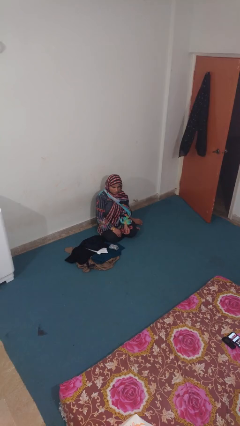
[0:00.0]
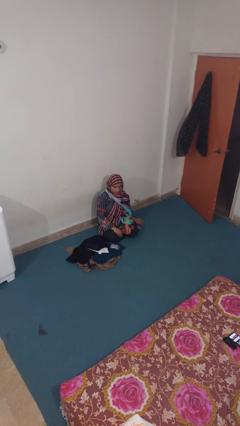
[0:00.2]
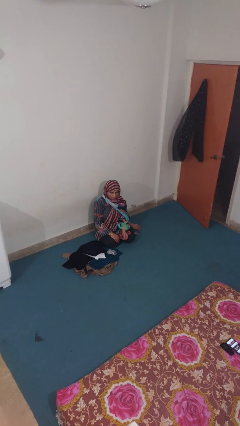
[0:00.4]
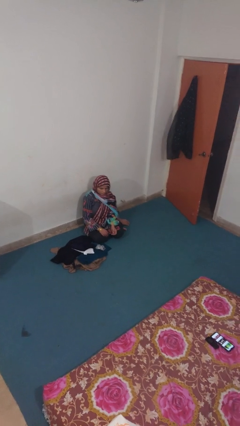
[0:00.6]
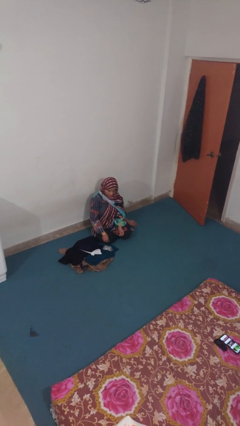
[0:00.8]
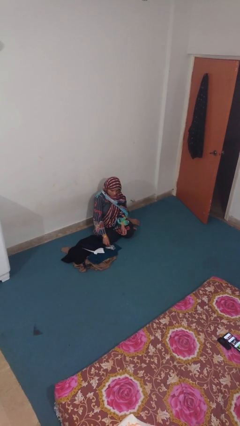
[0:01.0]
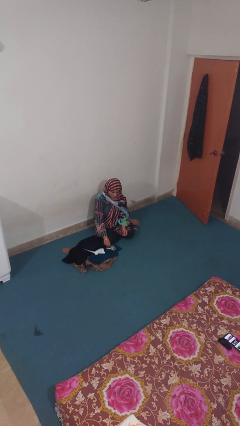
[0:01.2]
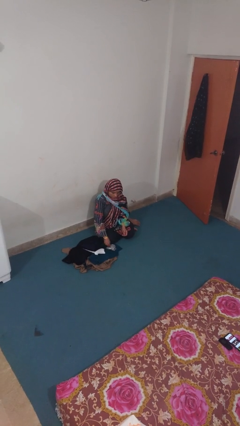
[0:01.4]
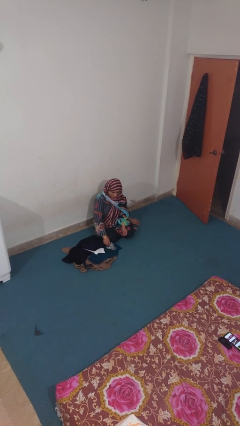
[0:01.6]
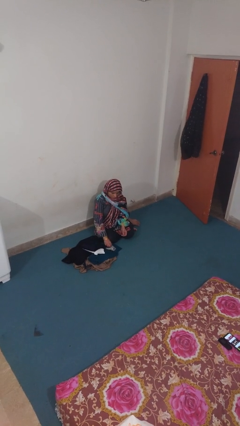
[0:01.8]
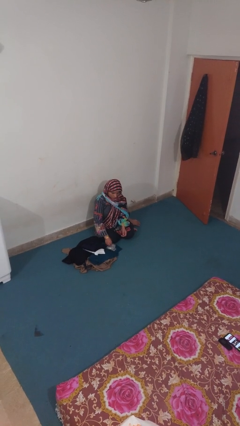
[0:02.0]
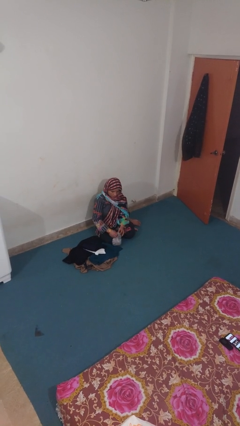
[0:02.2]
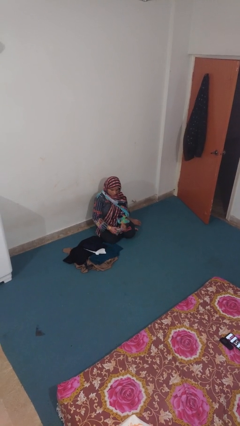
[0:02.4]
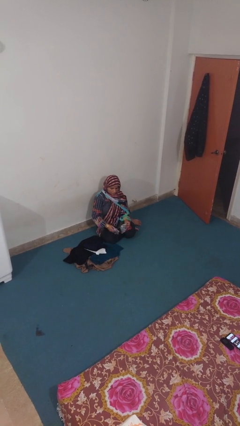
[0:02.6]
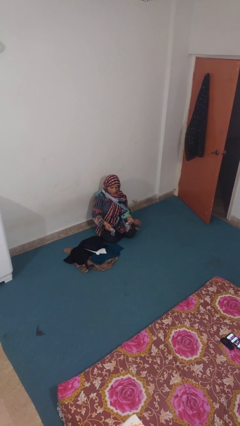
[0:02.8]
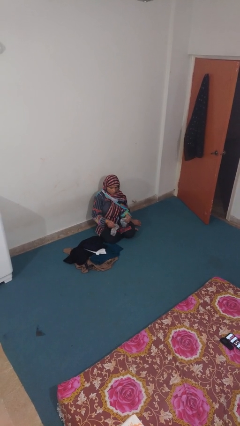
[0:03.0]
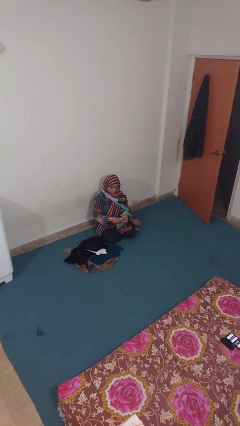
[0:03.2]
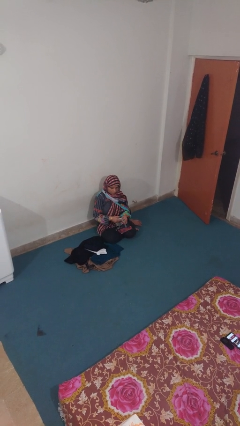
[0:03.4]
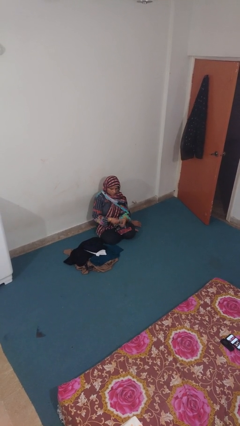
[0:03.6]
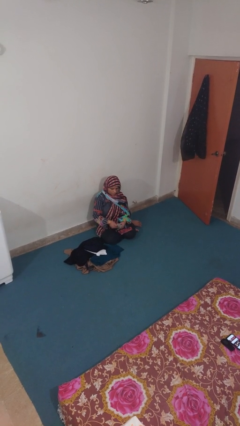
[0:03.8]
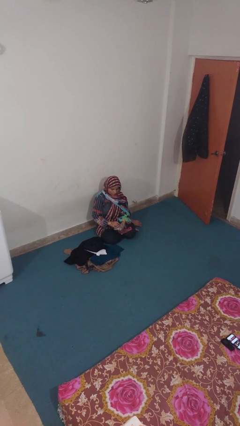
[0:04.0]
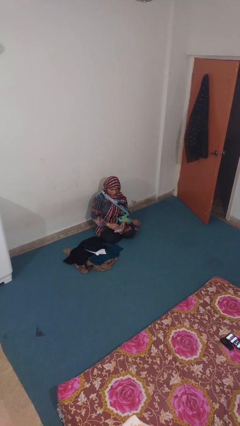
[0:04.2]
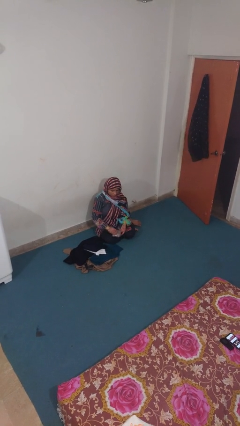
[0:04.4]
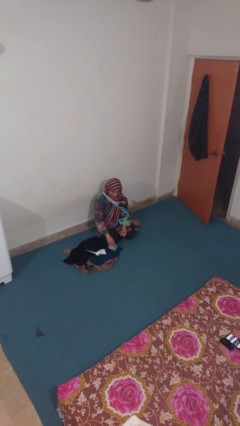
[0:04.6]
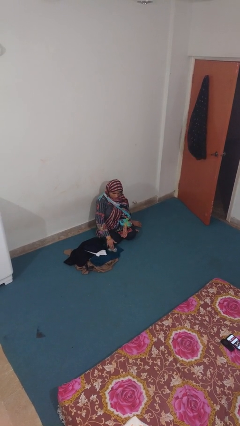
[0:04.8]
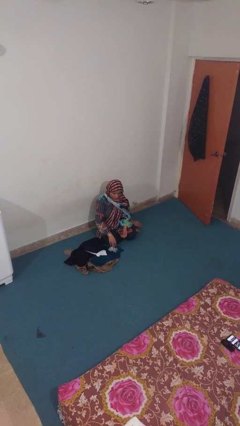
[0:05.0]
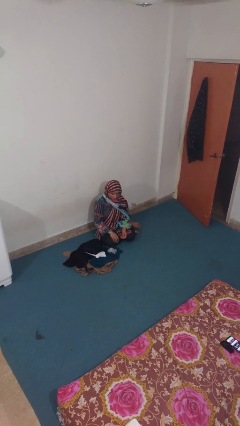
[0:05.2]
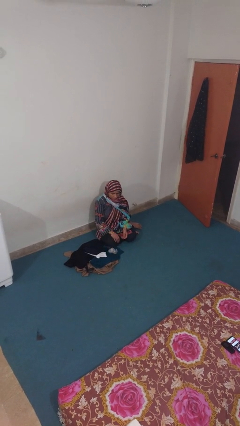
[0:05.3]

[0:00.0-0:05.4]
person folds socks

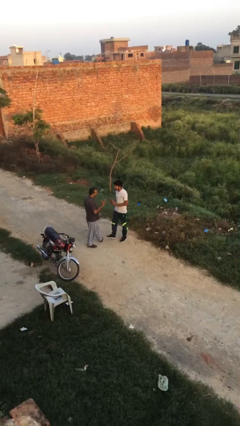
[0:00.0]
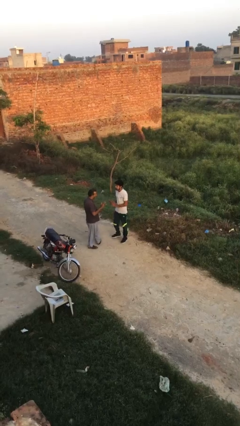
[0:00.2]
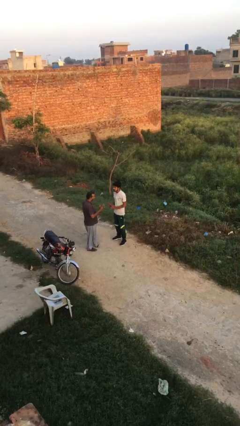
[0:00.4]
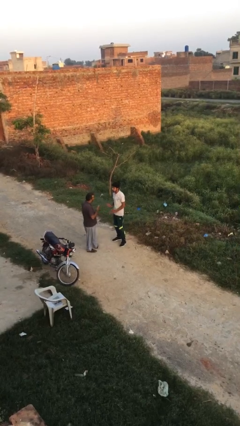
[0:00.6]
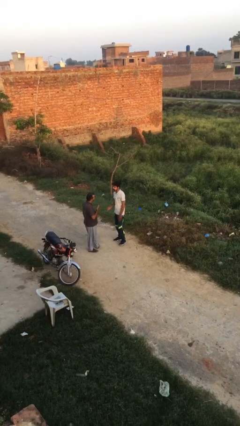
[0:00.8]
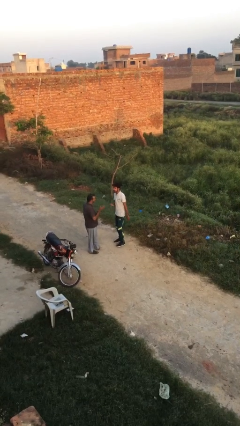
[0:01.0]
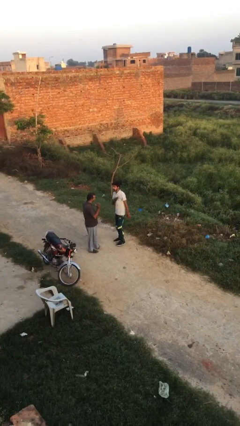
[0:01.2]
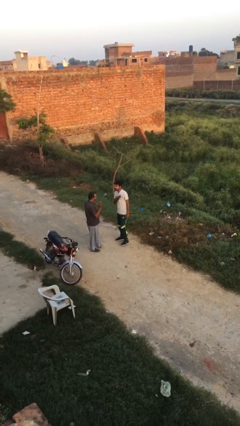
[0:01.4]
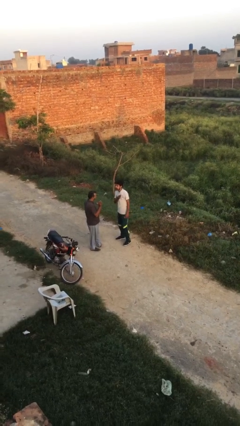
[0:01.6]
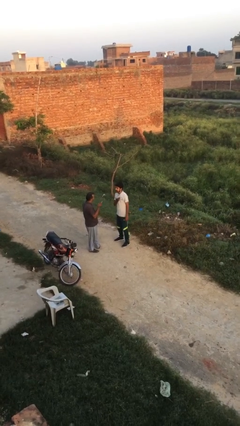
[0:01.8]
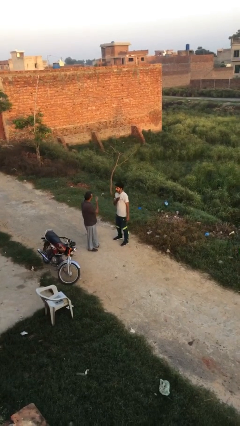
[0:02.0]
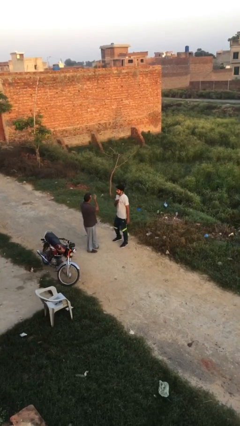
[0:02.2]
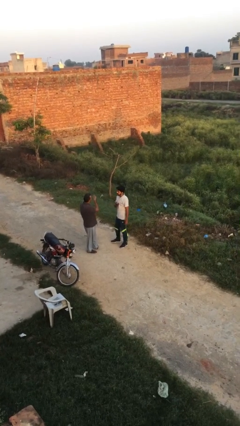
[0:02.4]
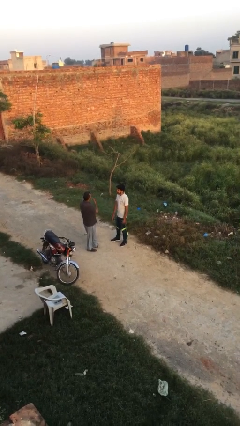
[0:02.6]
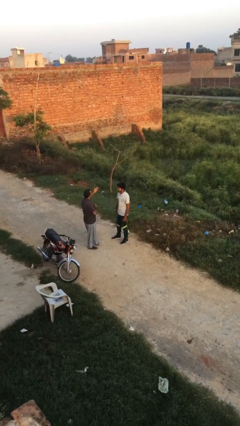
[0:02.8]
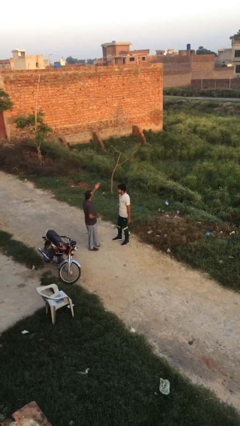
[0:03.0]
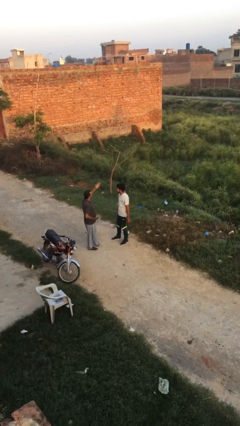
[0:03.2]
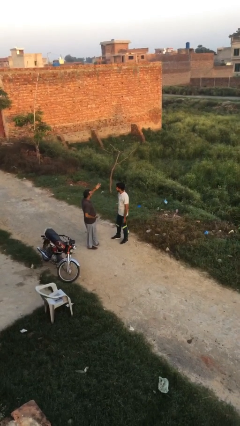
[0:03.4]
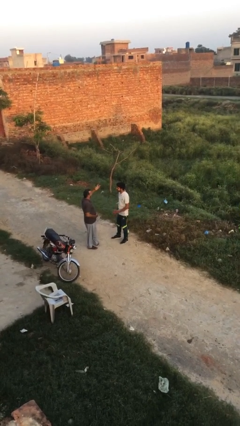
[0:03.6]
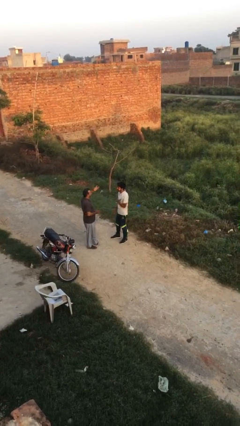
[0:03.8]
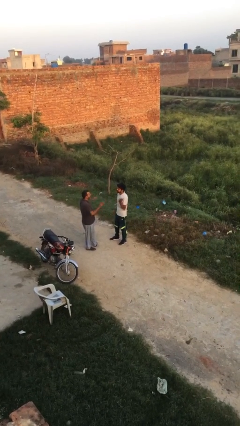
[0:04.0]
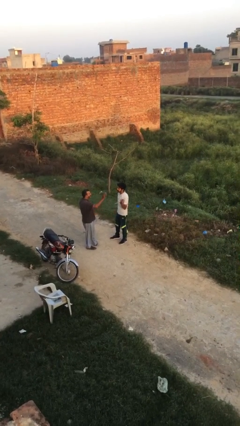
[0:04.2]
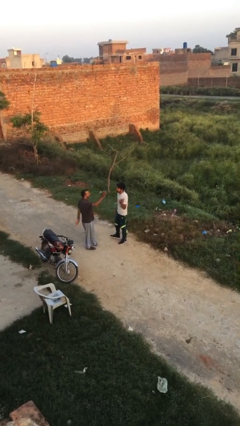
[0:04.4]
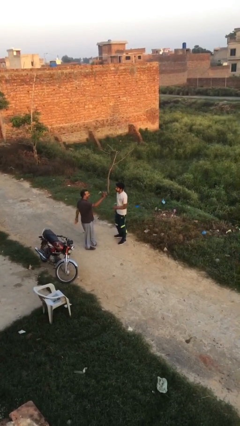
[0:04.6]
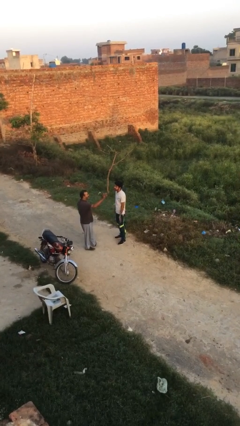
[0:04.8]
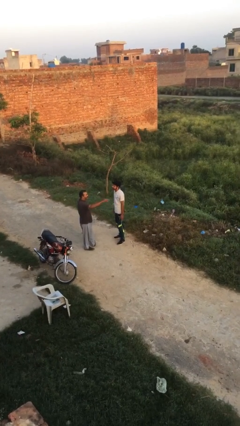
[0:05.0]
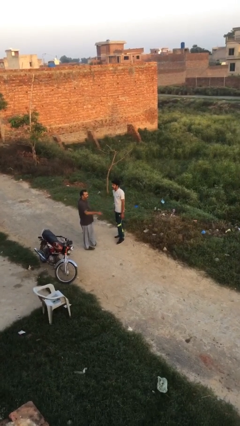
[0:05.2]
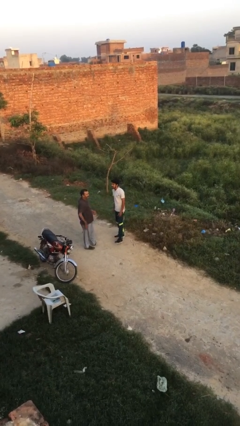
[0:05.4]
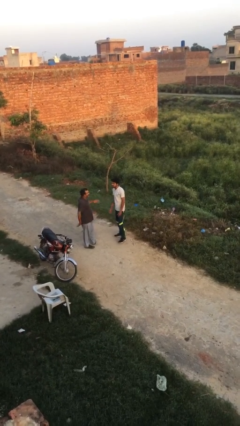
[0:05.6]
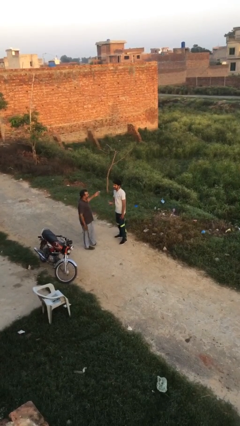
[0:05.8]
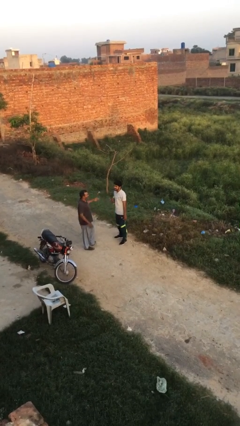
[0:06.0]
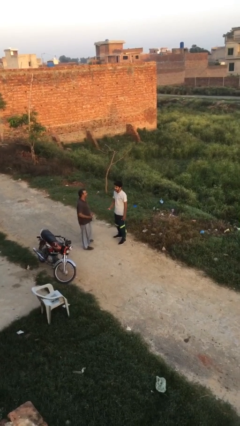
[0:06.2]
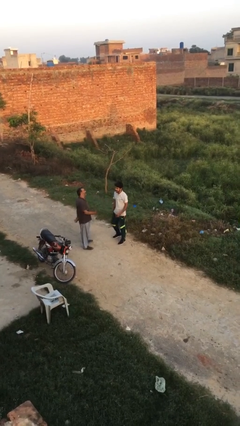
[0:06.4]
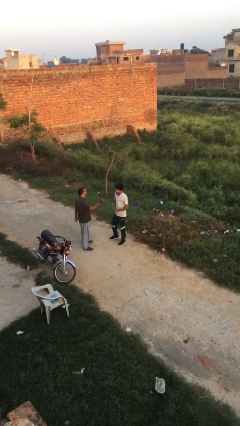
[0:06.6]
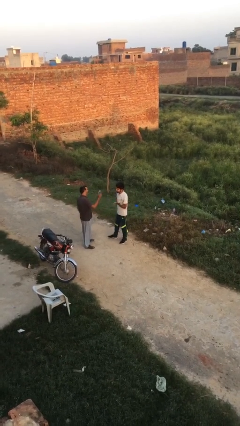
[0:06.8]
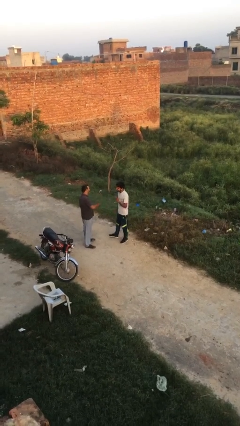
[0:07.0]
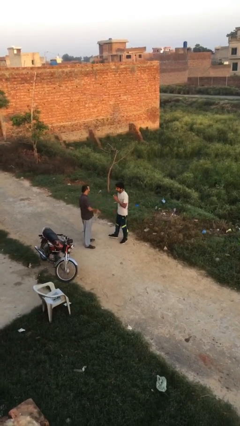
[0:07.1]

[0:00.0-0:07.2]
person talks to person

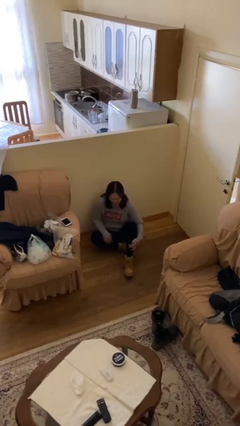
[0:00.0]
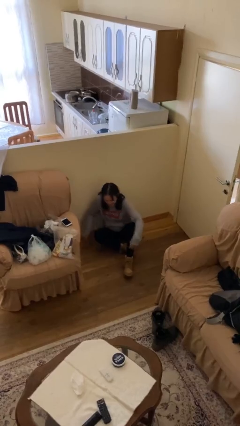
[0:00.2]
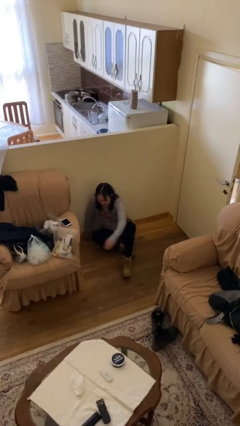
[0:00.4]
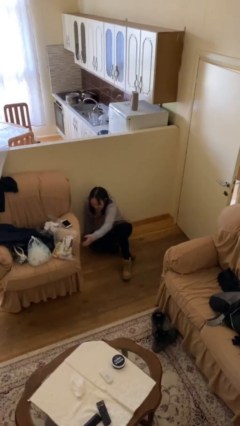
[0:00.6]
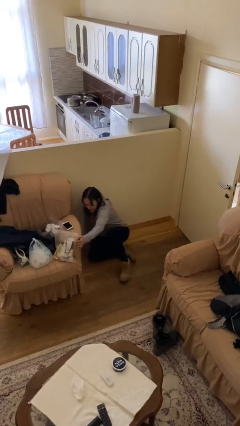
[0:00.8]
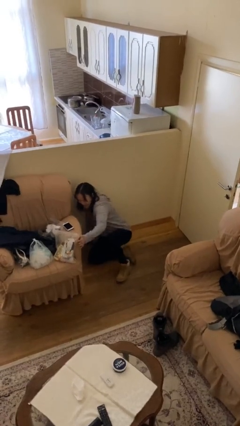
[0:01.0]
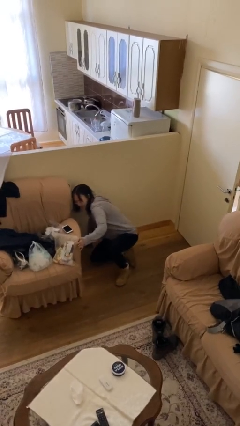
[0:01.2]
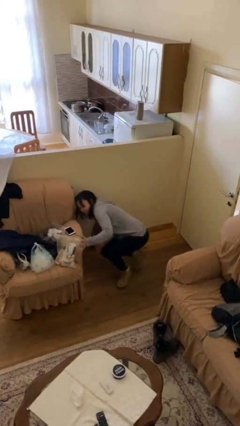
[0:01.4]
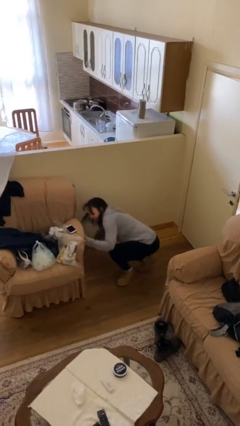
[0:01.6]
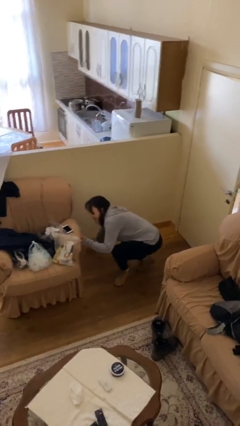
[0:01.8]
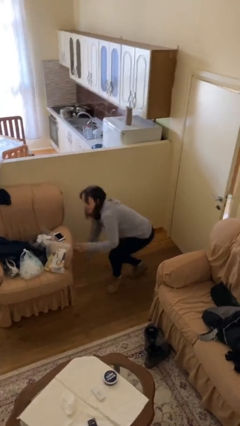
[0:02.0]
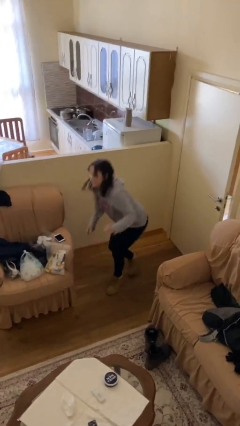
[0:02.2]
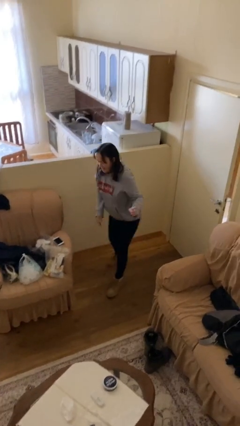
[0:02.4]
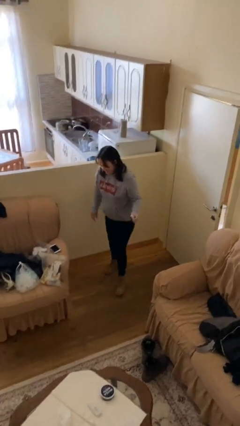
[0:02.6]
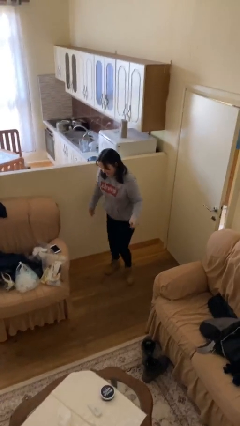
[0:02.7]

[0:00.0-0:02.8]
person stands up

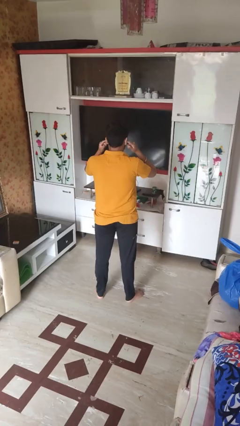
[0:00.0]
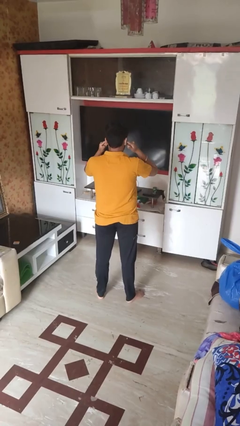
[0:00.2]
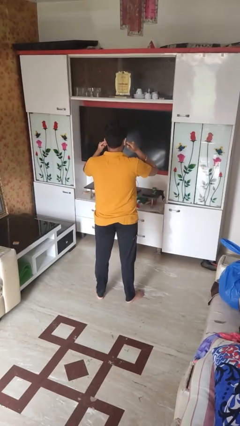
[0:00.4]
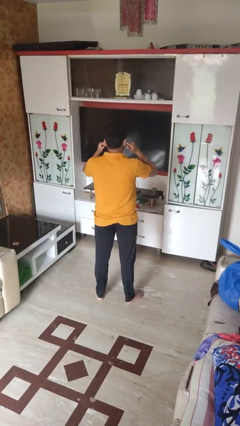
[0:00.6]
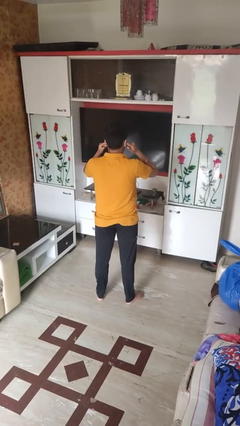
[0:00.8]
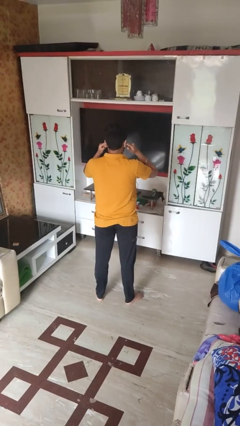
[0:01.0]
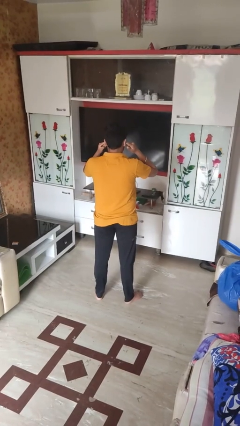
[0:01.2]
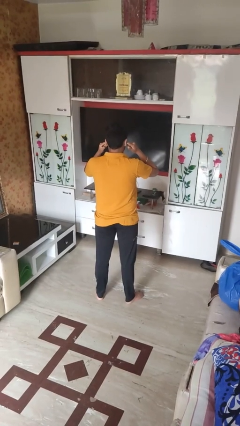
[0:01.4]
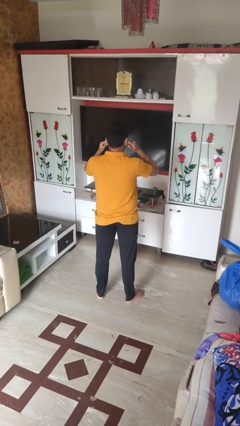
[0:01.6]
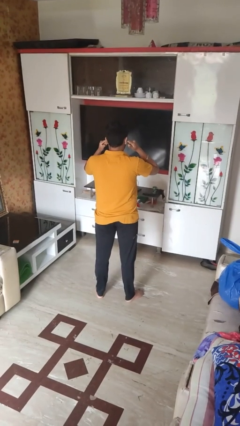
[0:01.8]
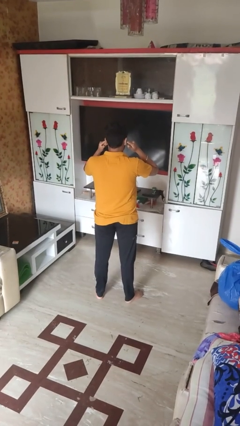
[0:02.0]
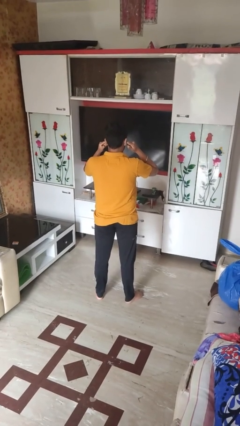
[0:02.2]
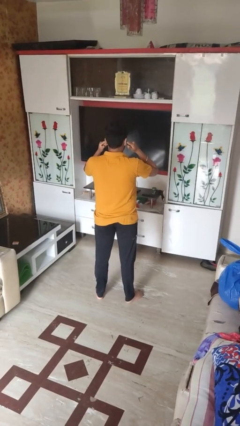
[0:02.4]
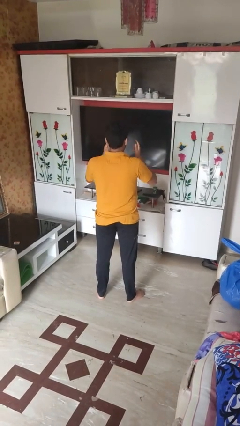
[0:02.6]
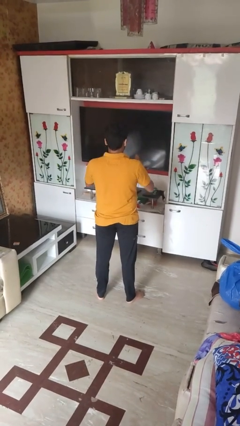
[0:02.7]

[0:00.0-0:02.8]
person puts fingers in ear
